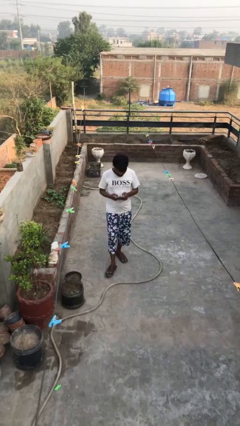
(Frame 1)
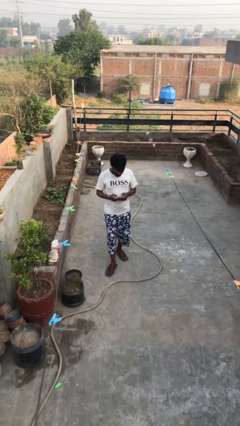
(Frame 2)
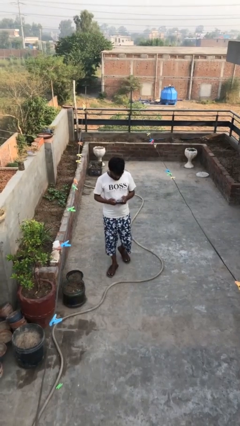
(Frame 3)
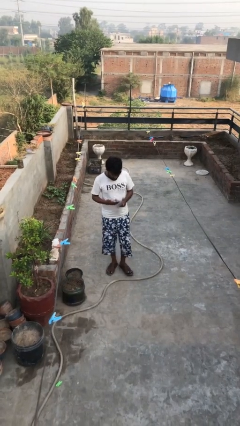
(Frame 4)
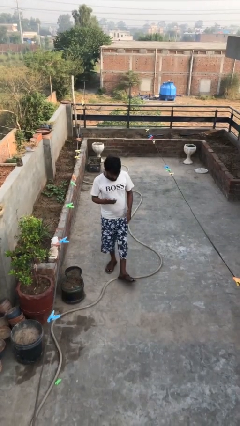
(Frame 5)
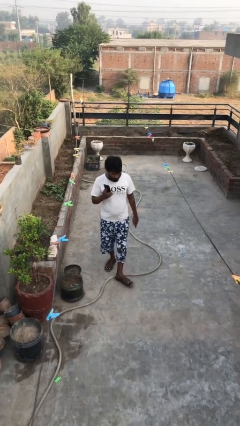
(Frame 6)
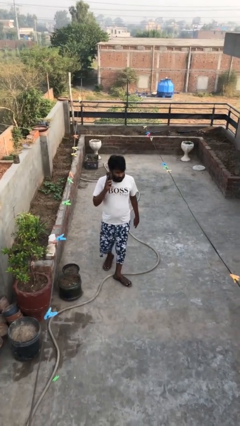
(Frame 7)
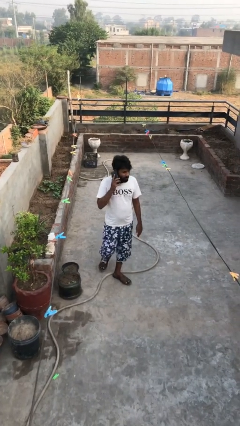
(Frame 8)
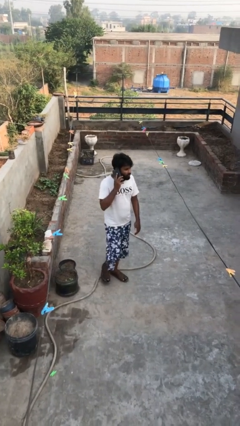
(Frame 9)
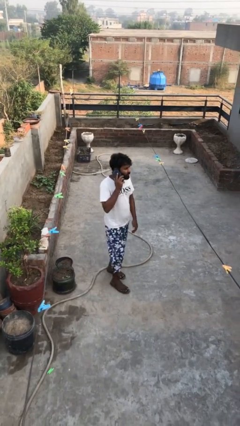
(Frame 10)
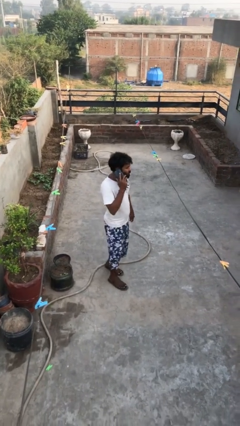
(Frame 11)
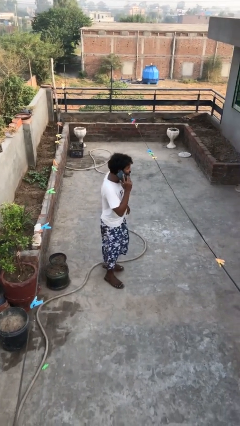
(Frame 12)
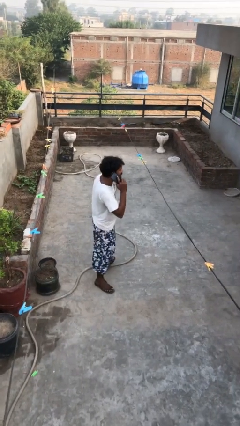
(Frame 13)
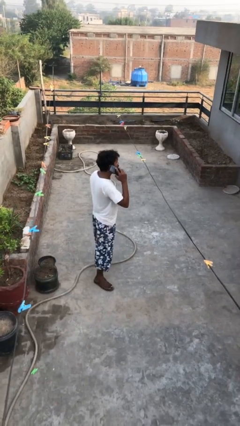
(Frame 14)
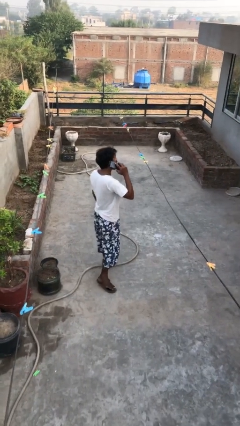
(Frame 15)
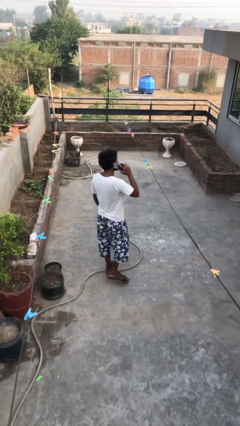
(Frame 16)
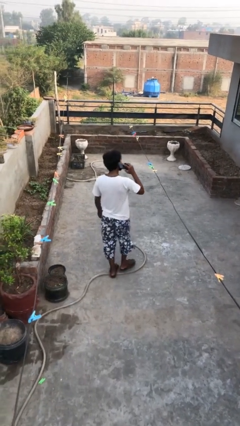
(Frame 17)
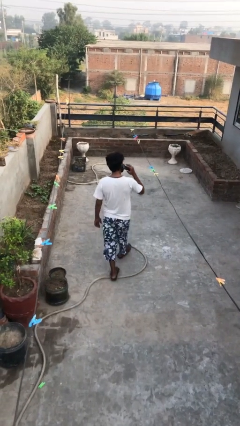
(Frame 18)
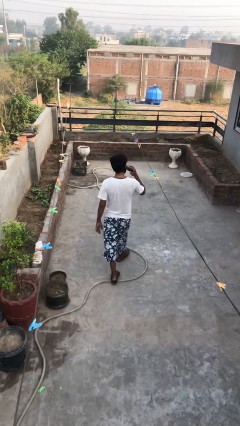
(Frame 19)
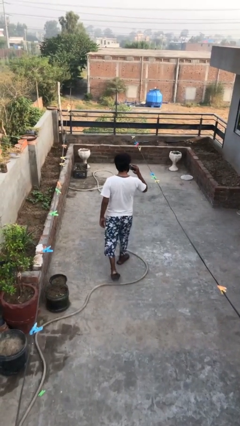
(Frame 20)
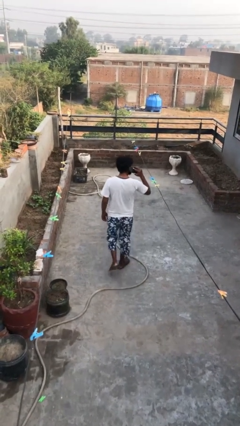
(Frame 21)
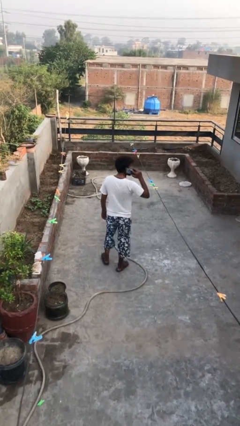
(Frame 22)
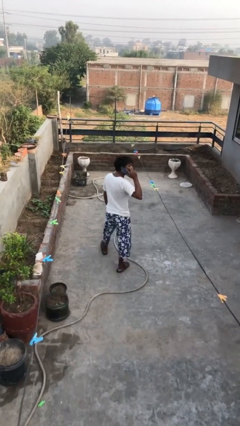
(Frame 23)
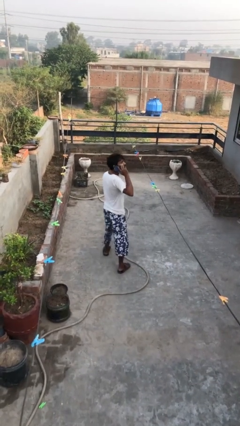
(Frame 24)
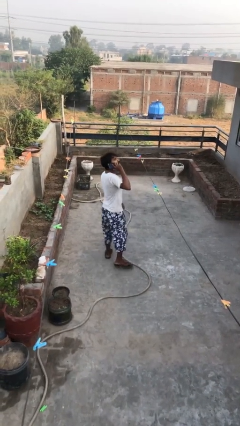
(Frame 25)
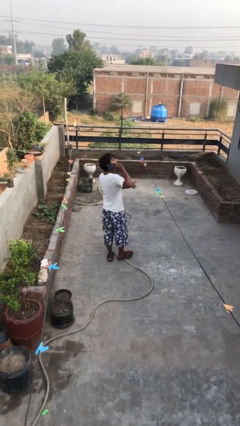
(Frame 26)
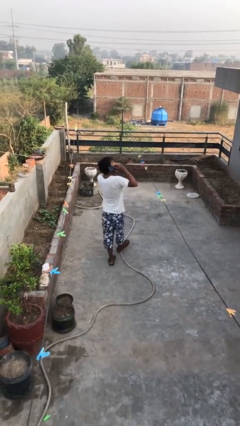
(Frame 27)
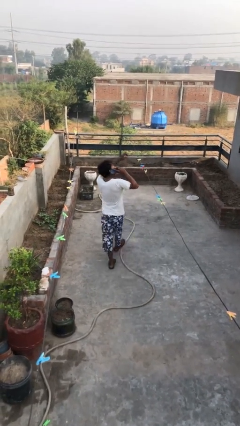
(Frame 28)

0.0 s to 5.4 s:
person talks on phone

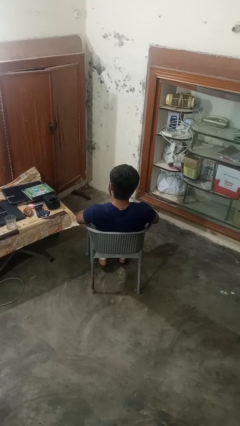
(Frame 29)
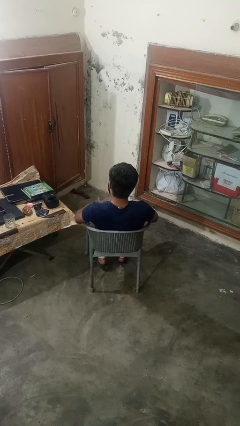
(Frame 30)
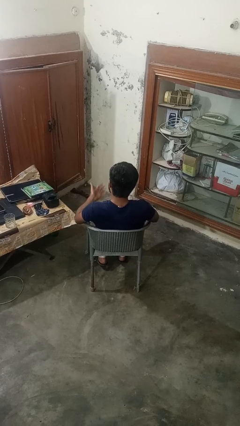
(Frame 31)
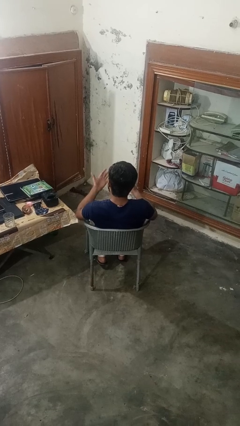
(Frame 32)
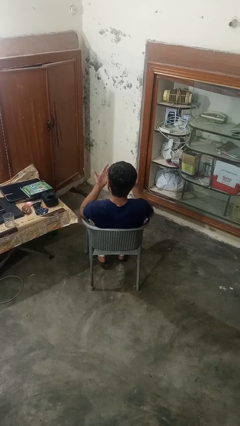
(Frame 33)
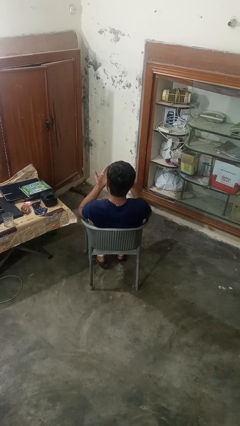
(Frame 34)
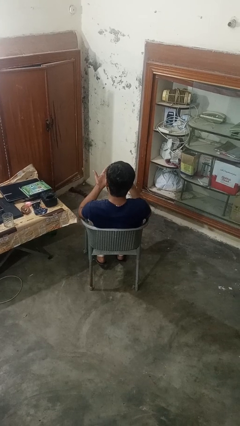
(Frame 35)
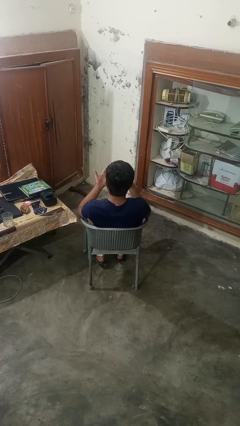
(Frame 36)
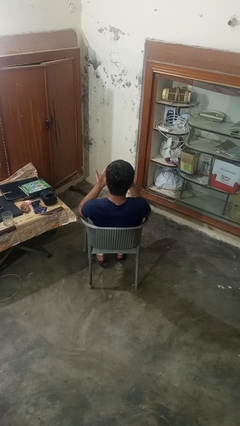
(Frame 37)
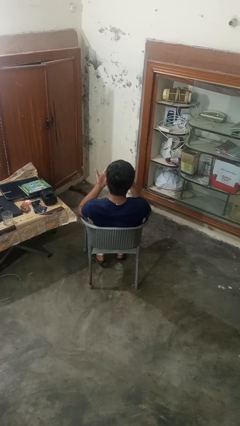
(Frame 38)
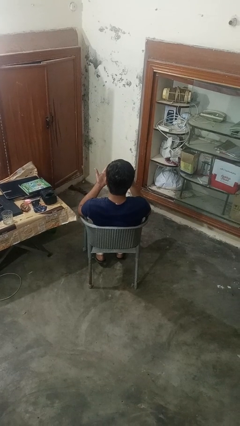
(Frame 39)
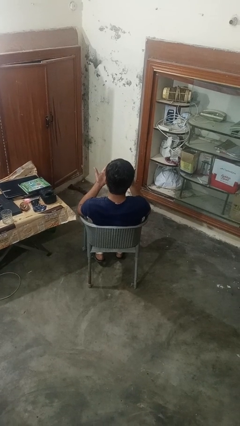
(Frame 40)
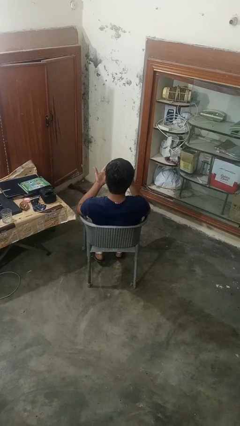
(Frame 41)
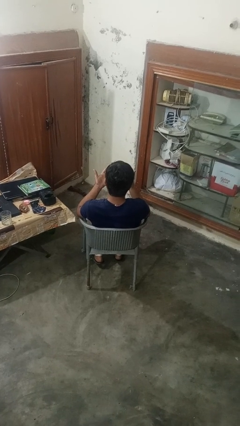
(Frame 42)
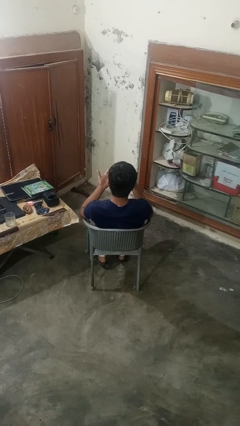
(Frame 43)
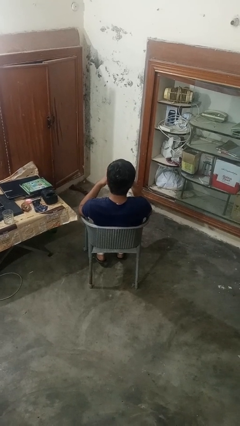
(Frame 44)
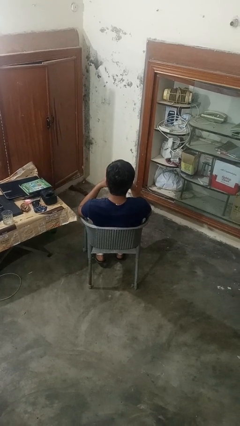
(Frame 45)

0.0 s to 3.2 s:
person looks at hands in lap

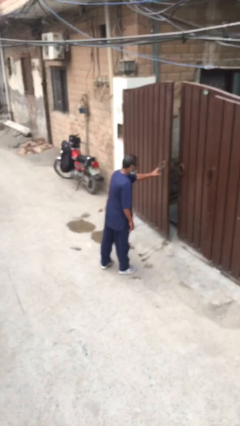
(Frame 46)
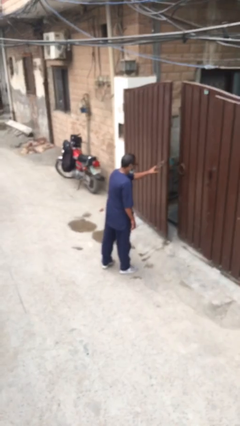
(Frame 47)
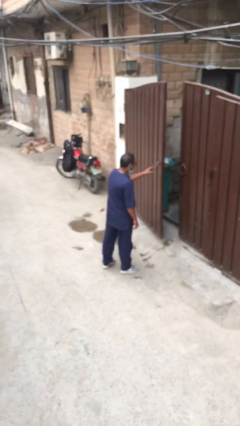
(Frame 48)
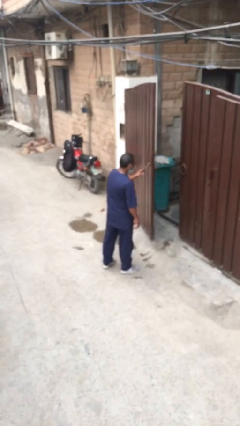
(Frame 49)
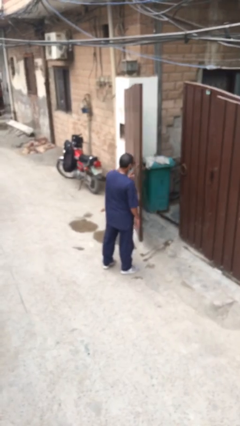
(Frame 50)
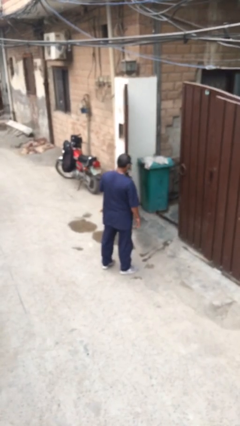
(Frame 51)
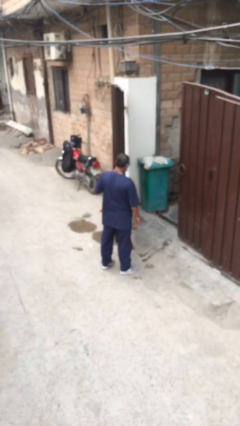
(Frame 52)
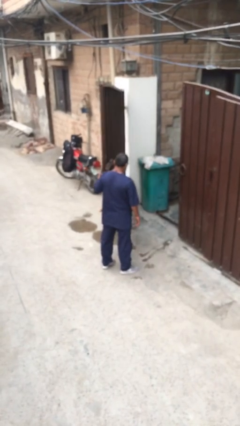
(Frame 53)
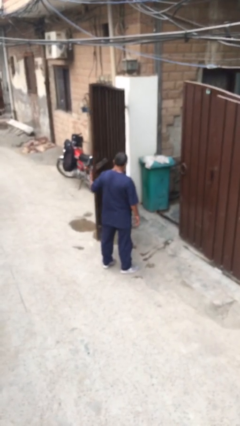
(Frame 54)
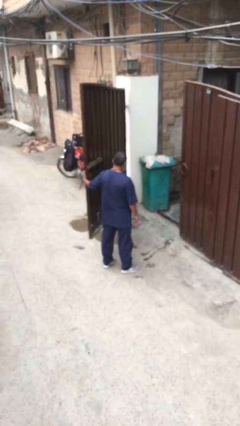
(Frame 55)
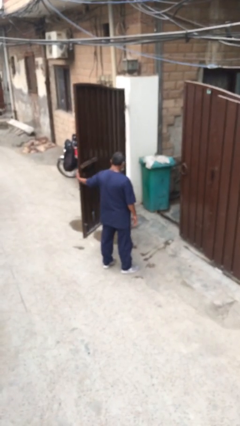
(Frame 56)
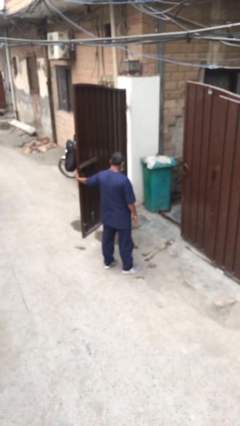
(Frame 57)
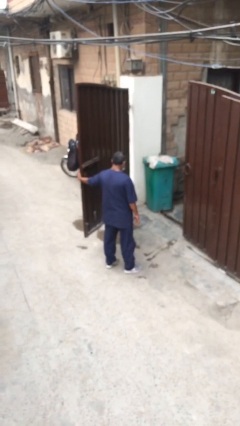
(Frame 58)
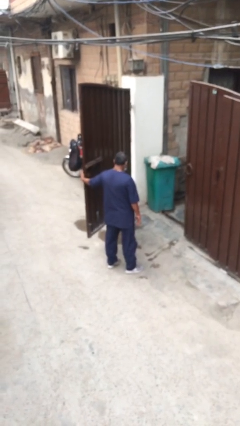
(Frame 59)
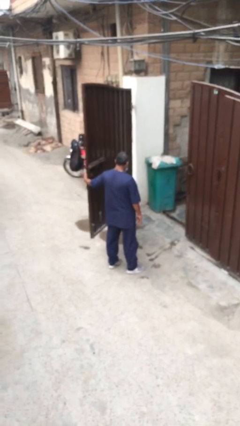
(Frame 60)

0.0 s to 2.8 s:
person opens facility door

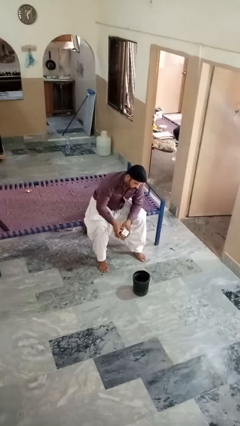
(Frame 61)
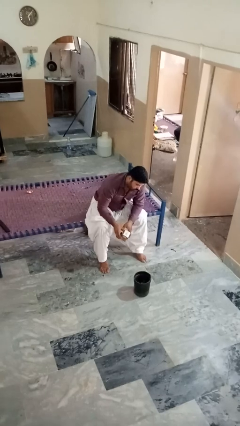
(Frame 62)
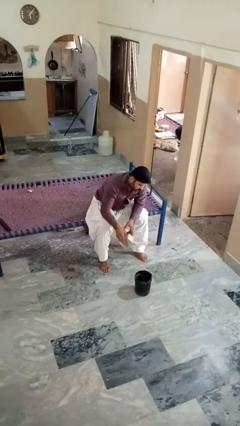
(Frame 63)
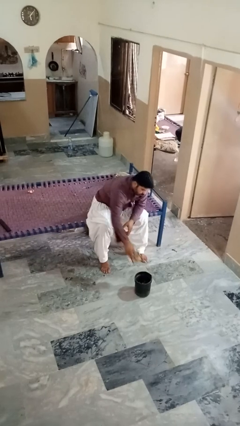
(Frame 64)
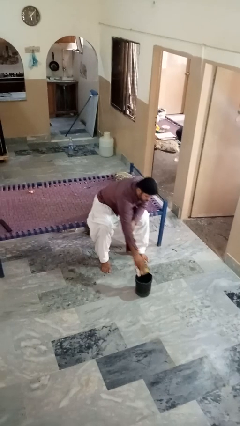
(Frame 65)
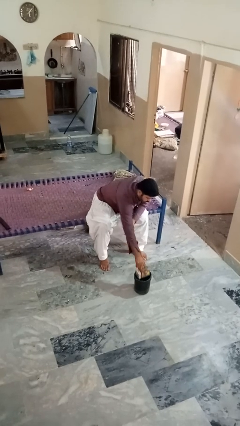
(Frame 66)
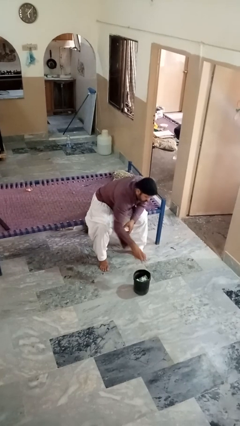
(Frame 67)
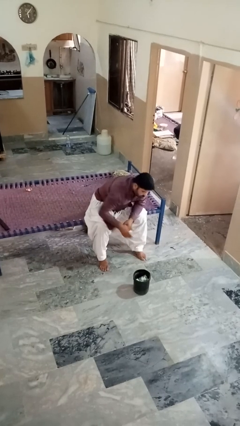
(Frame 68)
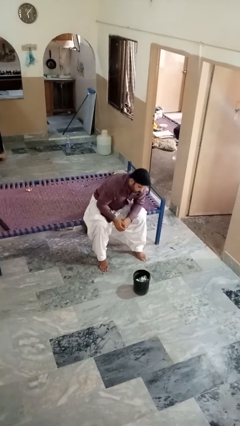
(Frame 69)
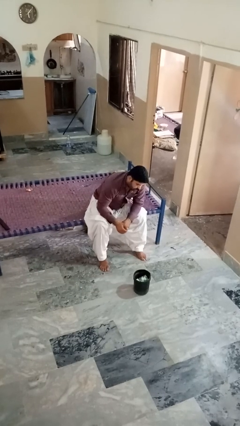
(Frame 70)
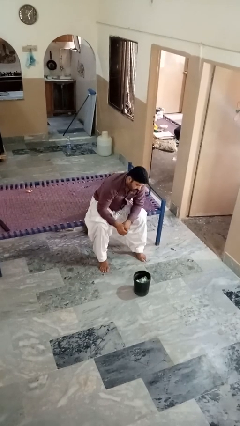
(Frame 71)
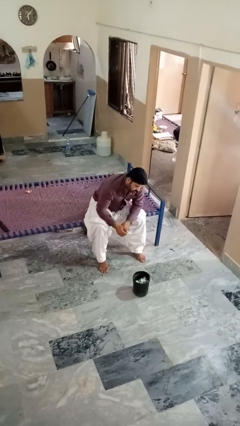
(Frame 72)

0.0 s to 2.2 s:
person puts object into basket

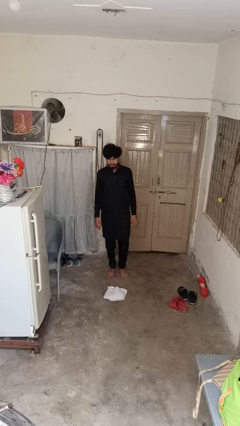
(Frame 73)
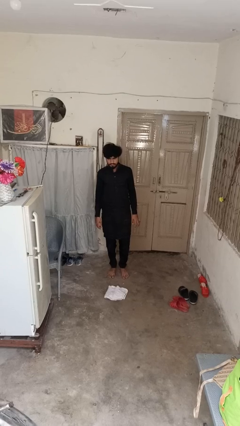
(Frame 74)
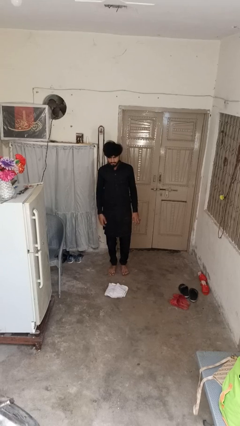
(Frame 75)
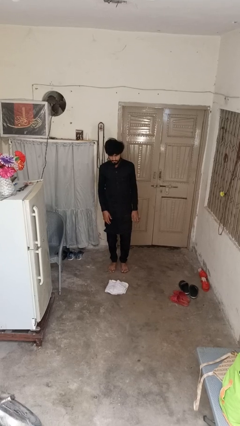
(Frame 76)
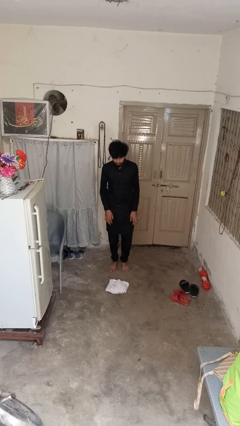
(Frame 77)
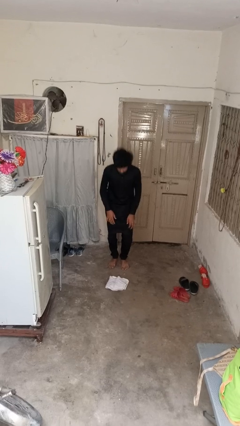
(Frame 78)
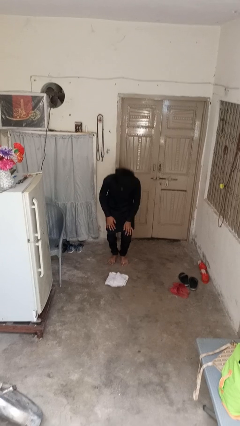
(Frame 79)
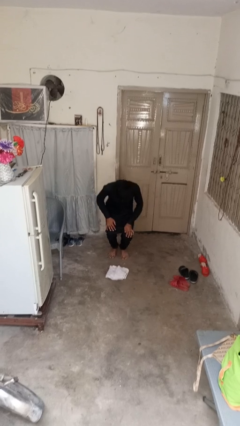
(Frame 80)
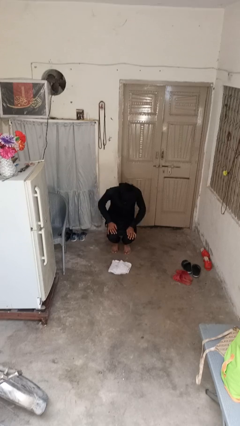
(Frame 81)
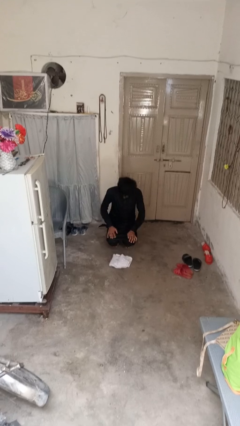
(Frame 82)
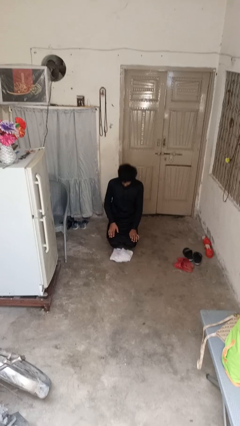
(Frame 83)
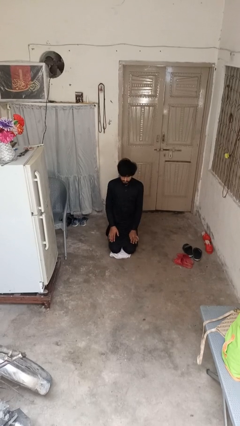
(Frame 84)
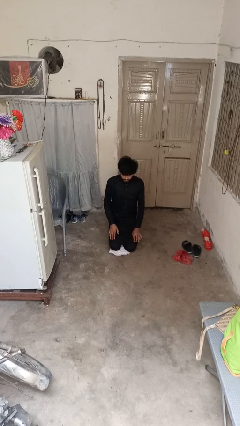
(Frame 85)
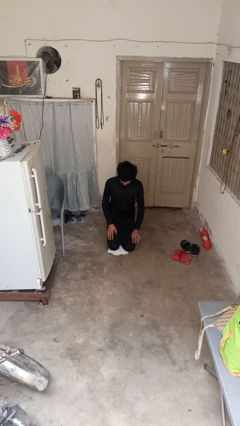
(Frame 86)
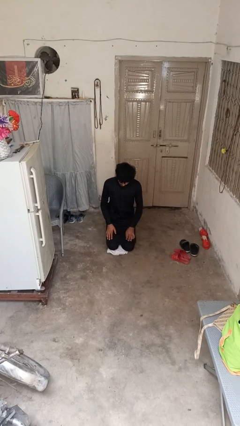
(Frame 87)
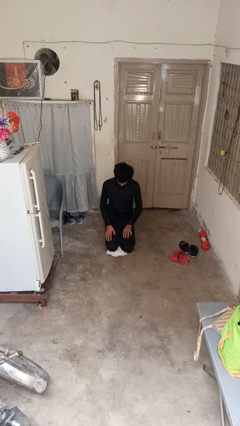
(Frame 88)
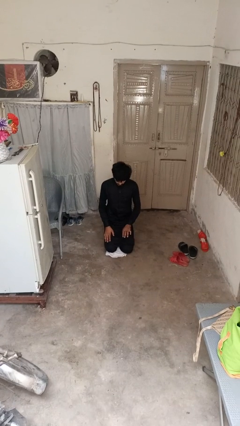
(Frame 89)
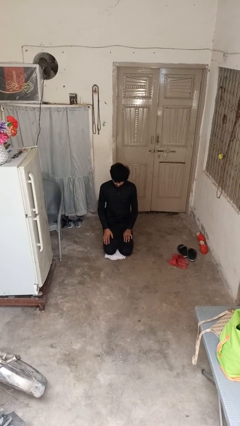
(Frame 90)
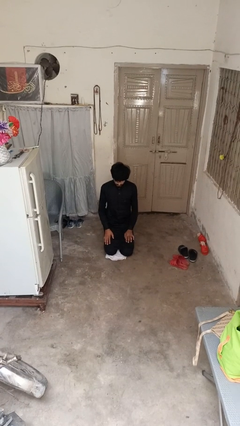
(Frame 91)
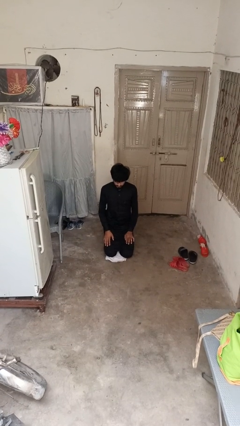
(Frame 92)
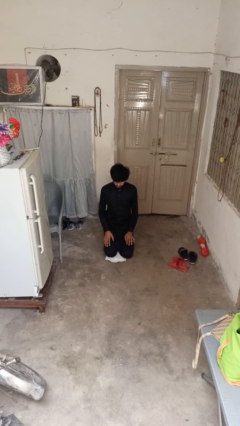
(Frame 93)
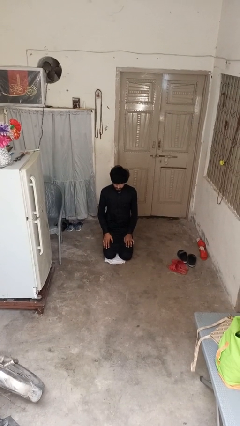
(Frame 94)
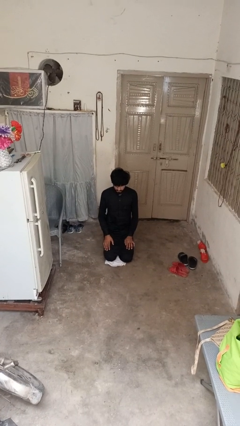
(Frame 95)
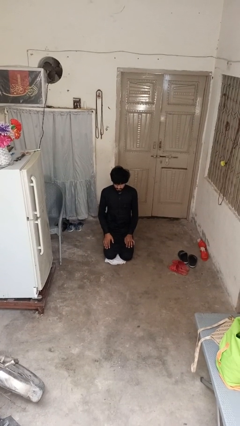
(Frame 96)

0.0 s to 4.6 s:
person kneels
